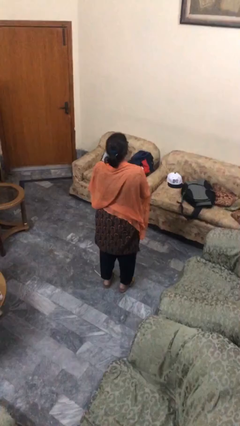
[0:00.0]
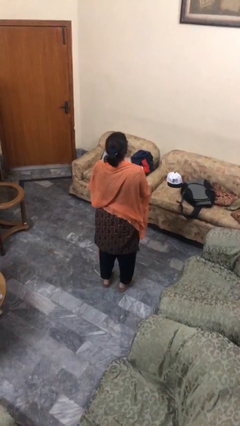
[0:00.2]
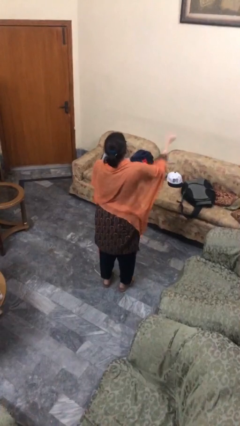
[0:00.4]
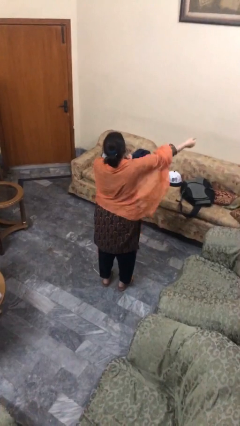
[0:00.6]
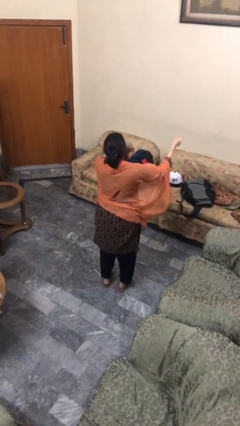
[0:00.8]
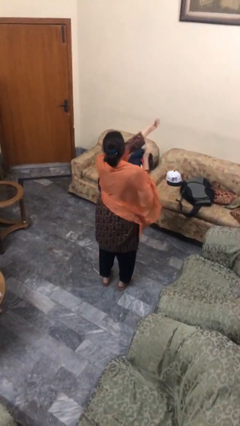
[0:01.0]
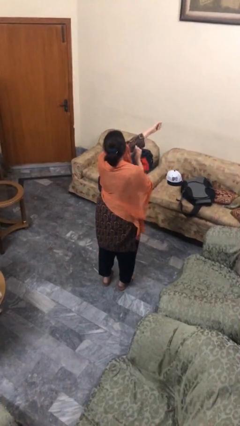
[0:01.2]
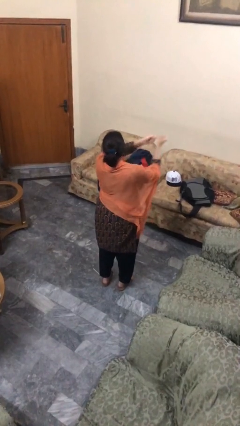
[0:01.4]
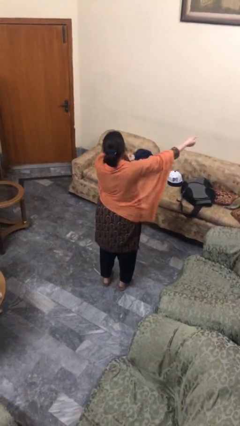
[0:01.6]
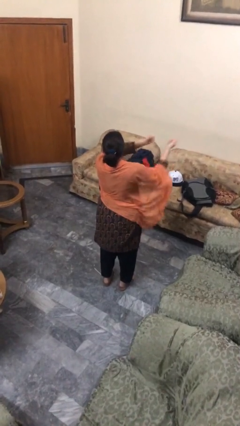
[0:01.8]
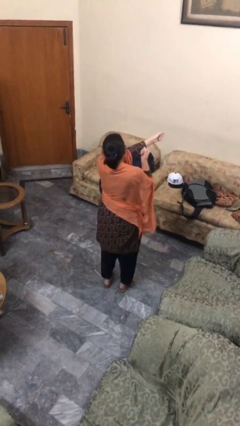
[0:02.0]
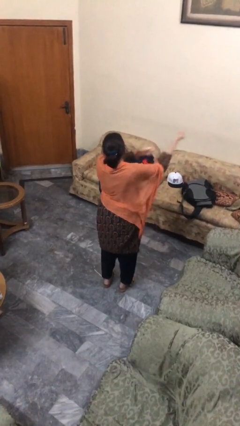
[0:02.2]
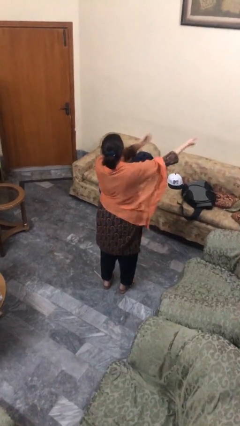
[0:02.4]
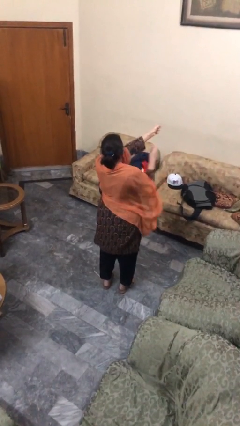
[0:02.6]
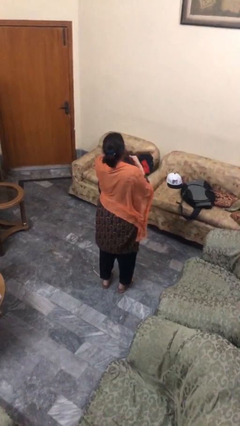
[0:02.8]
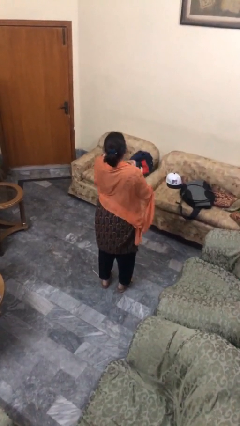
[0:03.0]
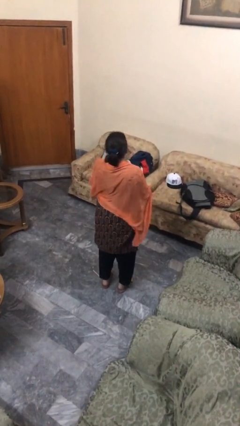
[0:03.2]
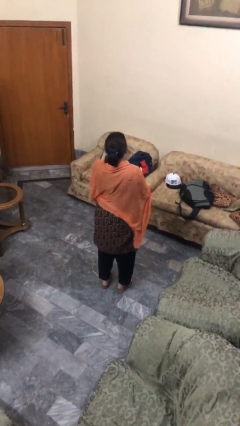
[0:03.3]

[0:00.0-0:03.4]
person punches

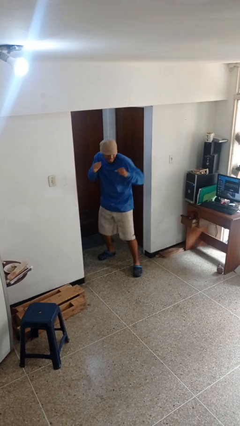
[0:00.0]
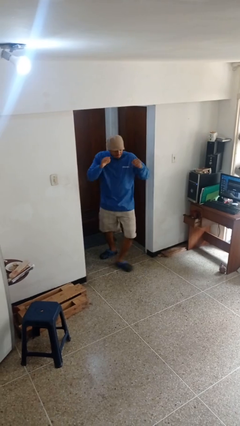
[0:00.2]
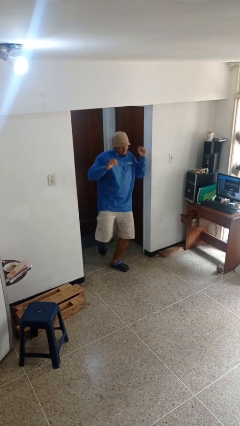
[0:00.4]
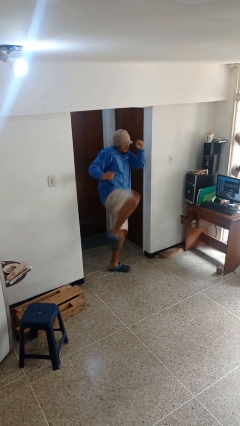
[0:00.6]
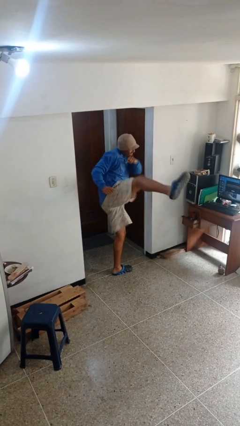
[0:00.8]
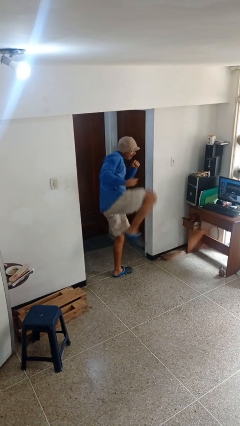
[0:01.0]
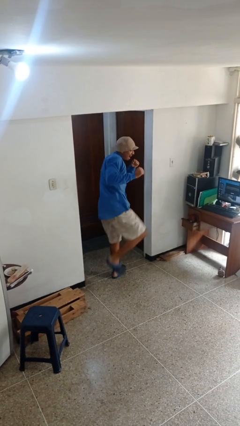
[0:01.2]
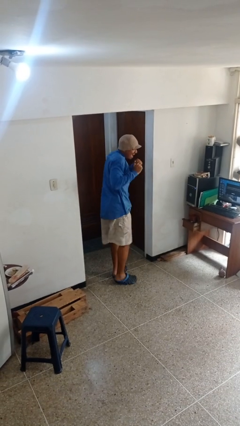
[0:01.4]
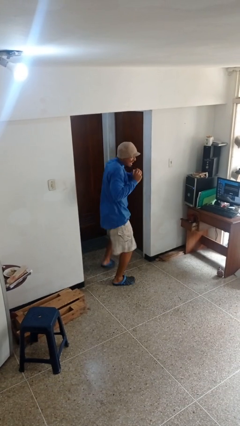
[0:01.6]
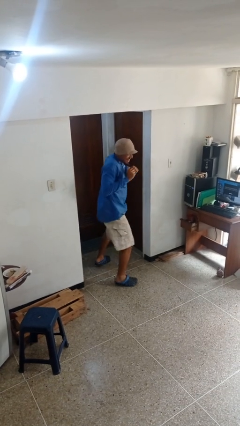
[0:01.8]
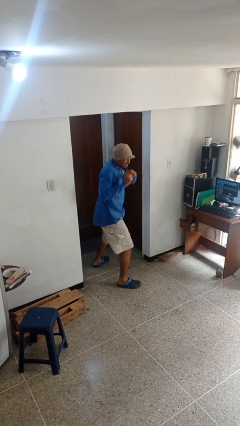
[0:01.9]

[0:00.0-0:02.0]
person karate kicks

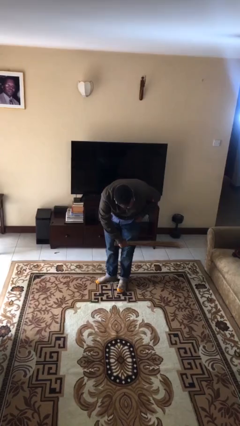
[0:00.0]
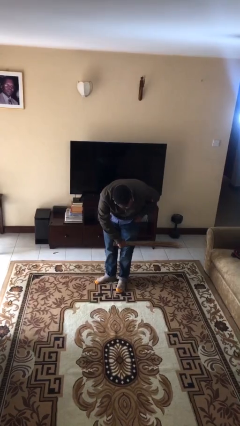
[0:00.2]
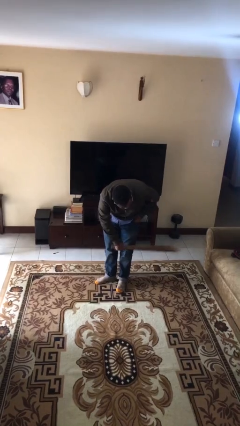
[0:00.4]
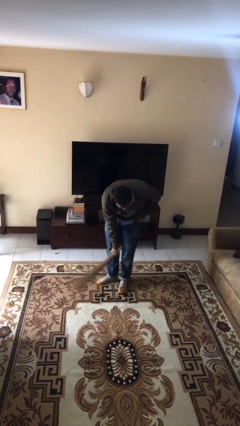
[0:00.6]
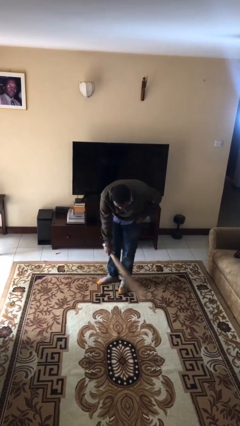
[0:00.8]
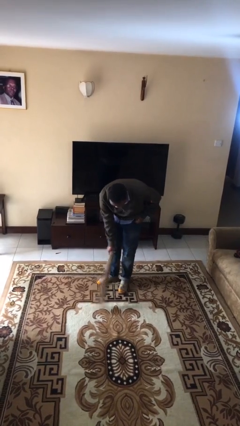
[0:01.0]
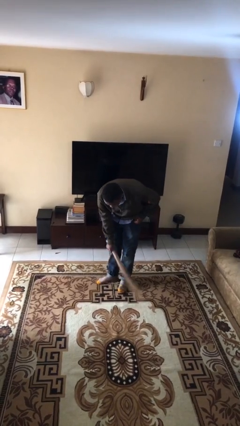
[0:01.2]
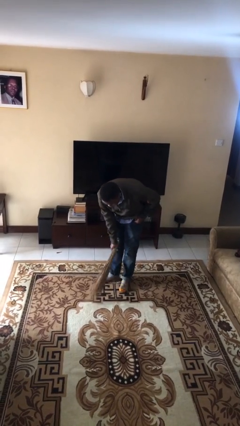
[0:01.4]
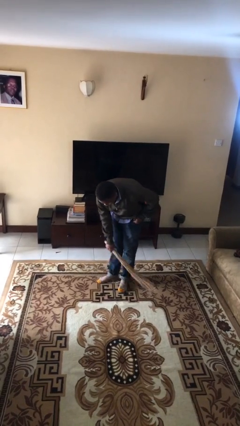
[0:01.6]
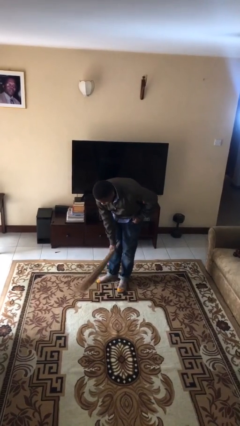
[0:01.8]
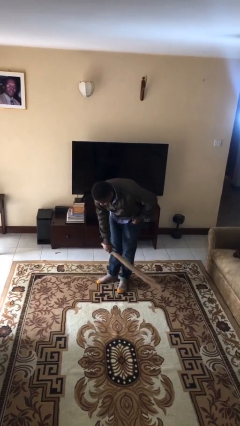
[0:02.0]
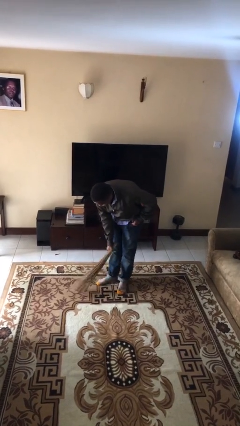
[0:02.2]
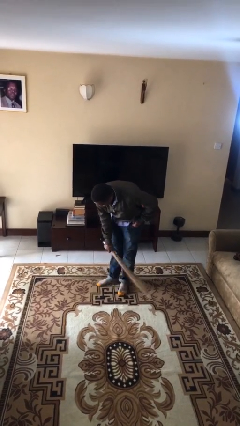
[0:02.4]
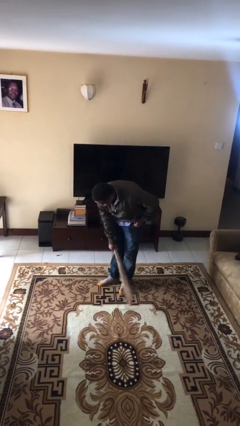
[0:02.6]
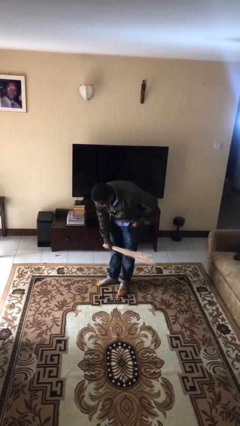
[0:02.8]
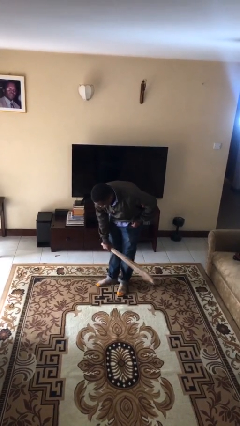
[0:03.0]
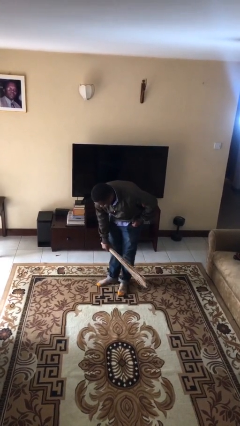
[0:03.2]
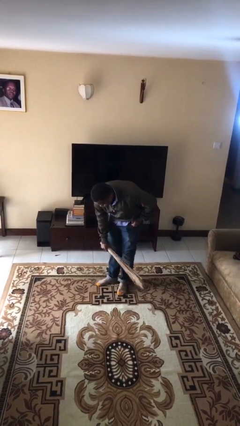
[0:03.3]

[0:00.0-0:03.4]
person sweeps floor

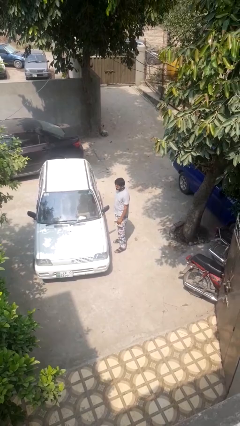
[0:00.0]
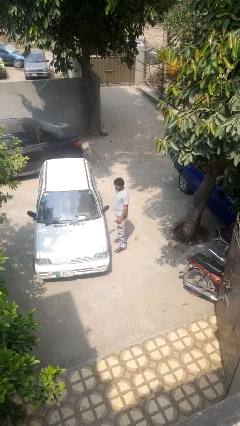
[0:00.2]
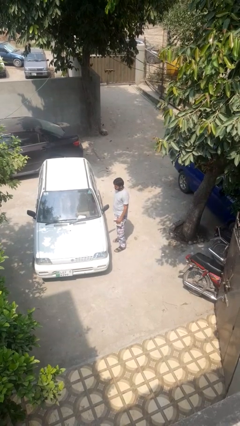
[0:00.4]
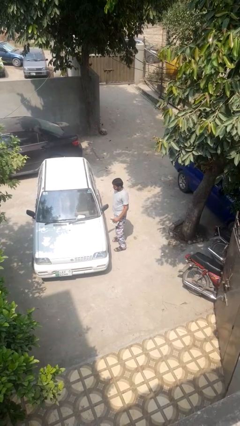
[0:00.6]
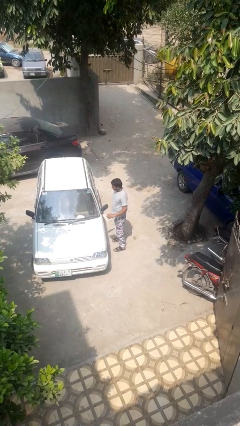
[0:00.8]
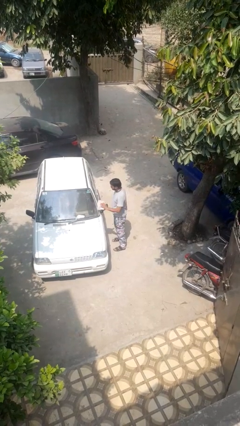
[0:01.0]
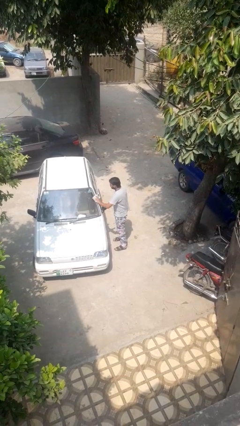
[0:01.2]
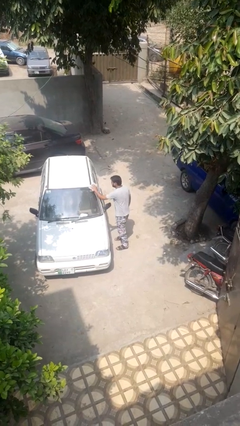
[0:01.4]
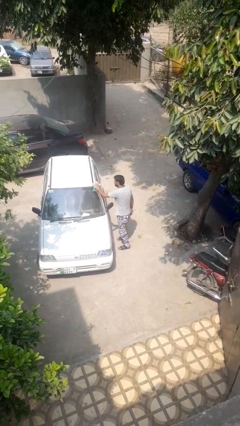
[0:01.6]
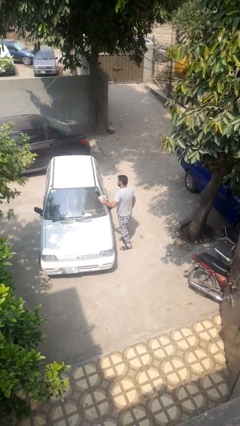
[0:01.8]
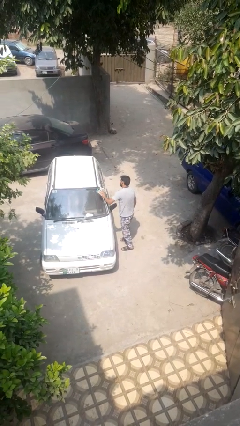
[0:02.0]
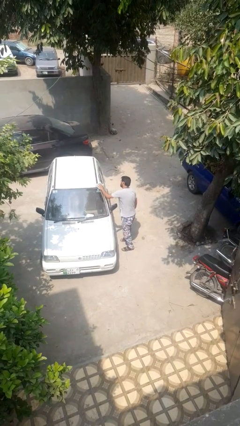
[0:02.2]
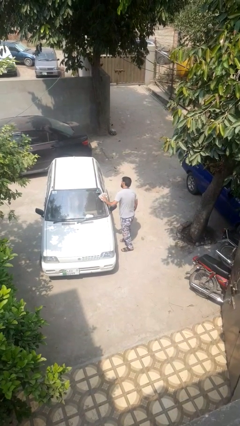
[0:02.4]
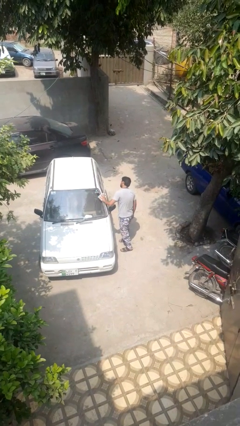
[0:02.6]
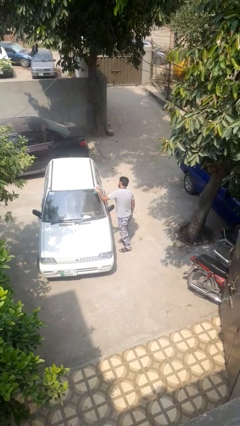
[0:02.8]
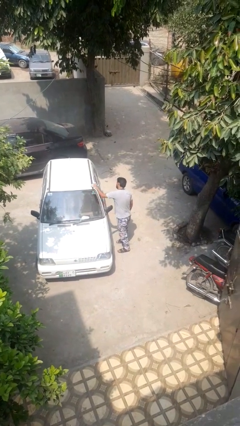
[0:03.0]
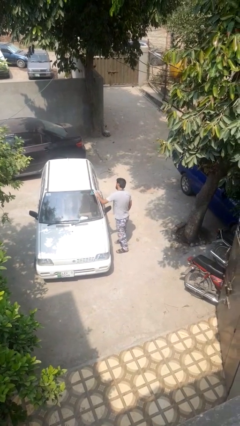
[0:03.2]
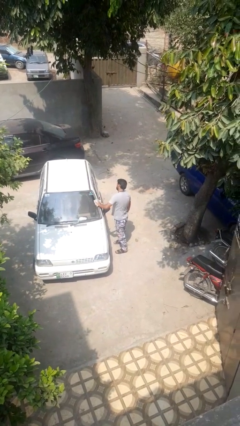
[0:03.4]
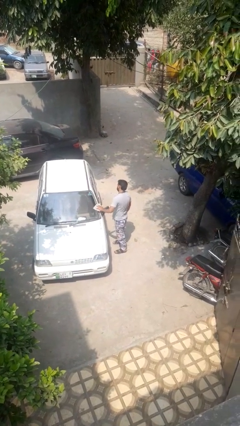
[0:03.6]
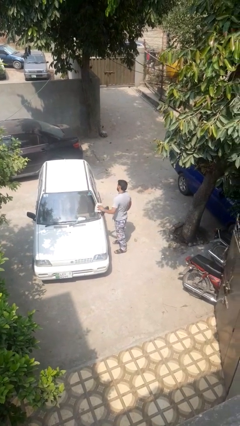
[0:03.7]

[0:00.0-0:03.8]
person polishes car with rag

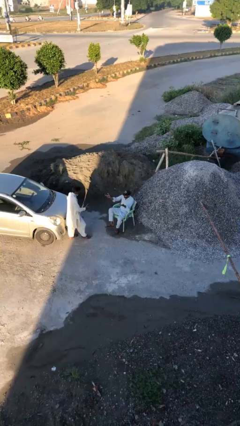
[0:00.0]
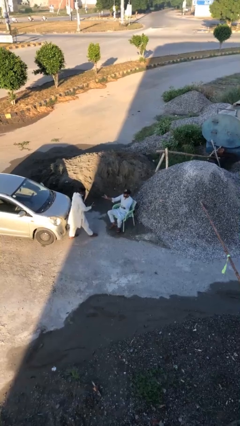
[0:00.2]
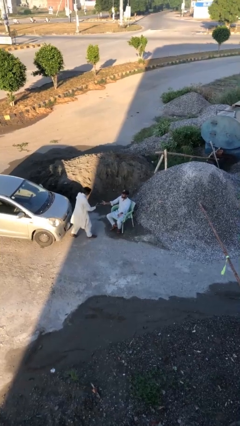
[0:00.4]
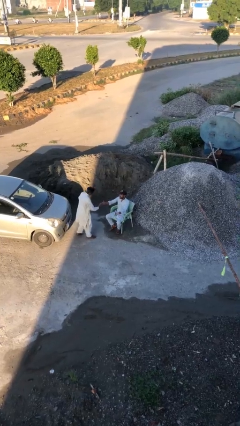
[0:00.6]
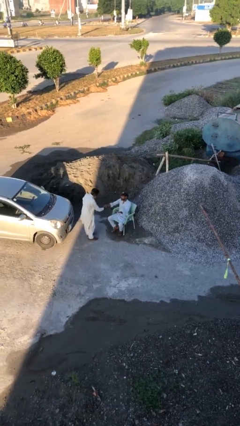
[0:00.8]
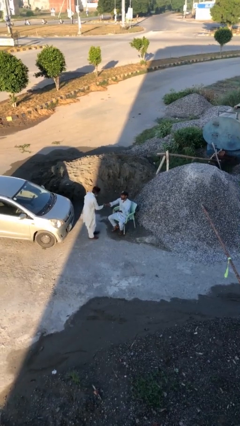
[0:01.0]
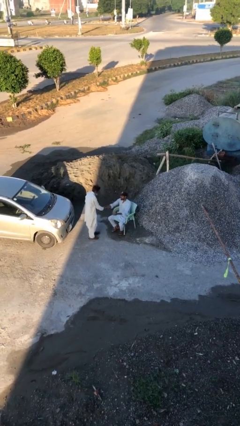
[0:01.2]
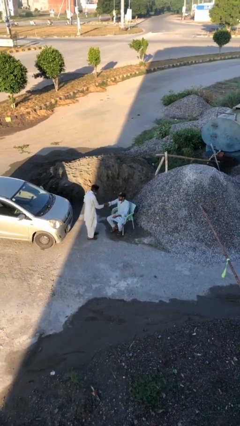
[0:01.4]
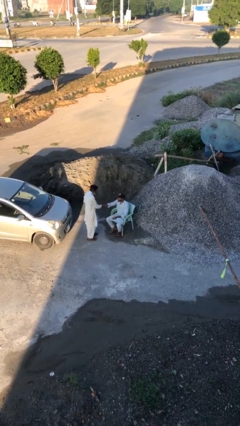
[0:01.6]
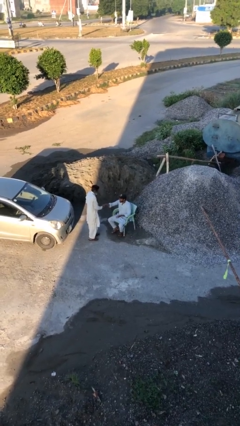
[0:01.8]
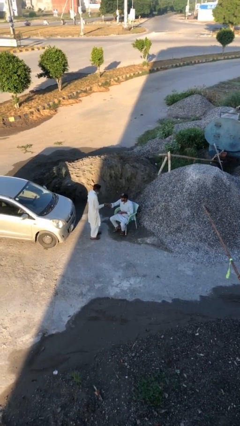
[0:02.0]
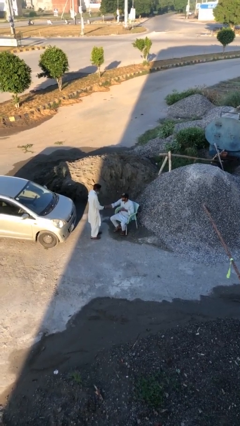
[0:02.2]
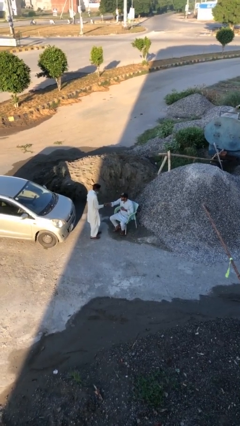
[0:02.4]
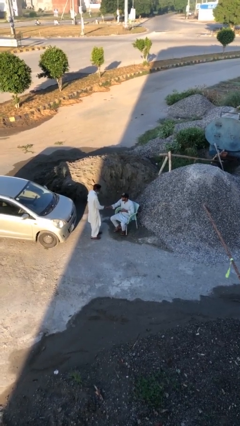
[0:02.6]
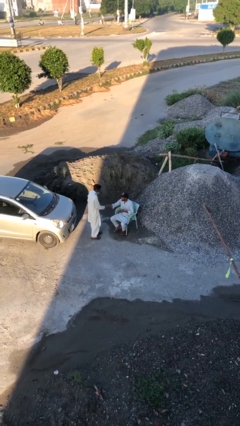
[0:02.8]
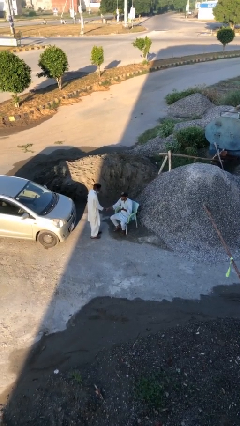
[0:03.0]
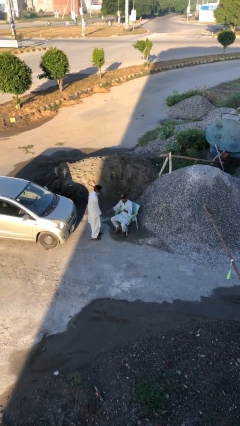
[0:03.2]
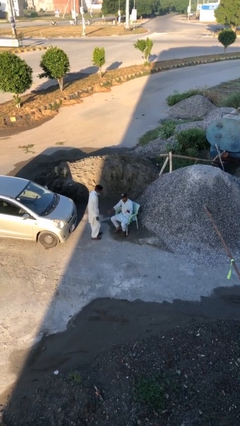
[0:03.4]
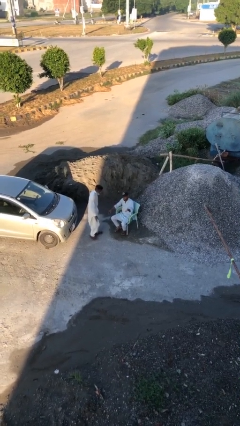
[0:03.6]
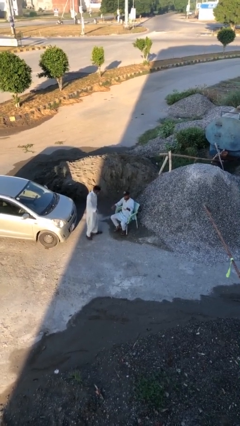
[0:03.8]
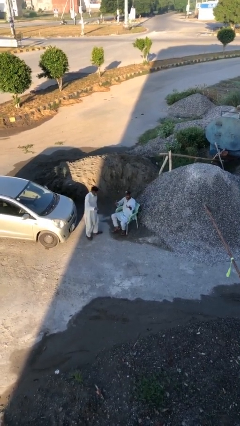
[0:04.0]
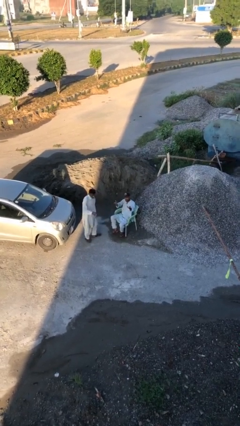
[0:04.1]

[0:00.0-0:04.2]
person shakes hand

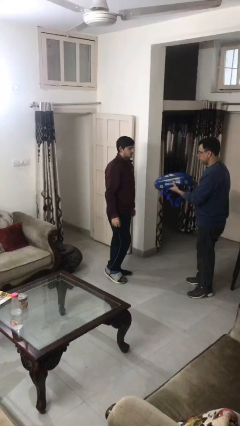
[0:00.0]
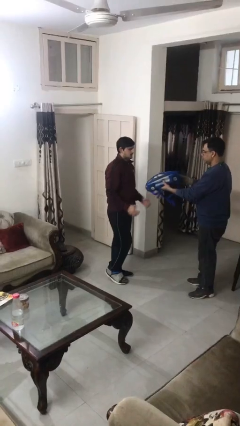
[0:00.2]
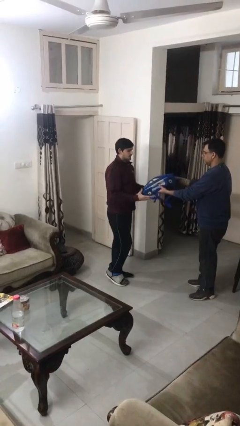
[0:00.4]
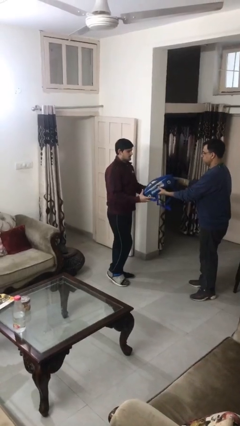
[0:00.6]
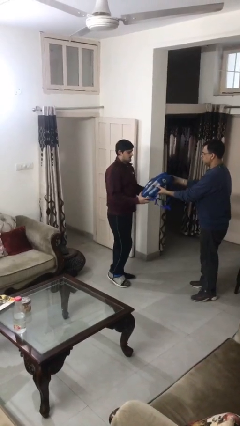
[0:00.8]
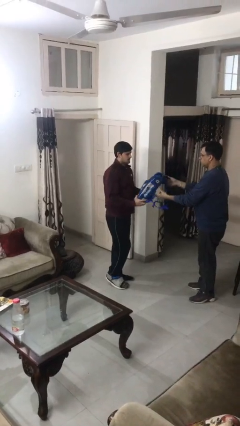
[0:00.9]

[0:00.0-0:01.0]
person transfers object to person
